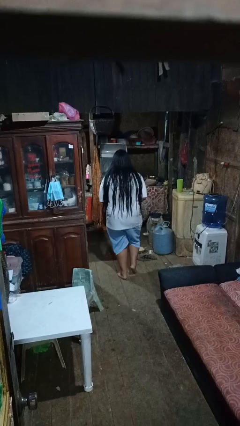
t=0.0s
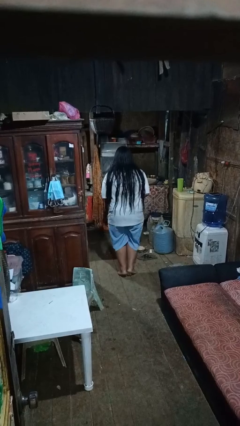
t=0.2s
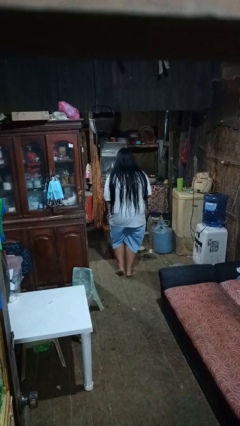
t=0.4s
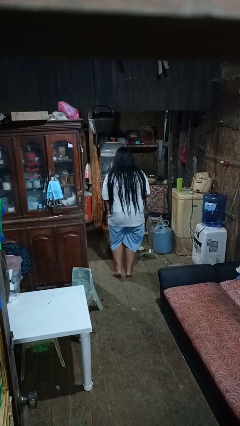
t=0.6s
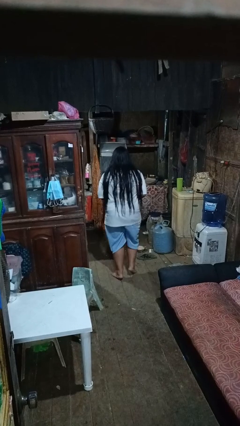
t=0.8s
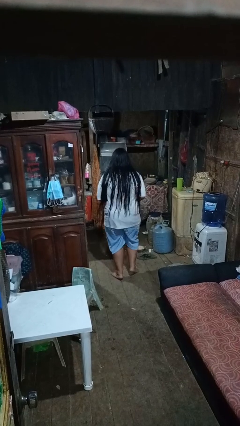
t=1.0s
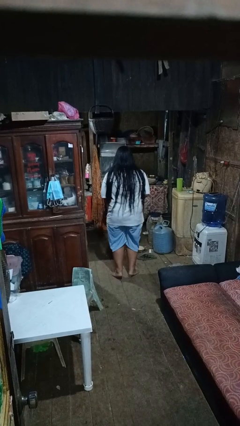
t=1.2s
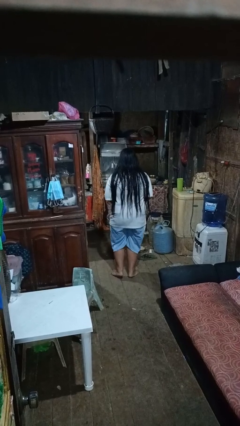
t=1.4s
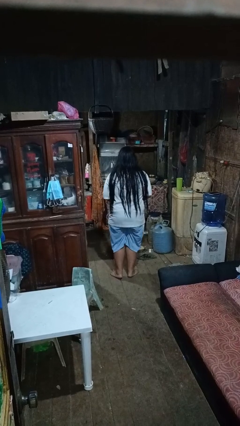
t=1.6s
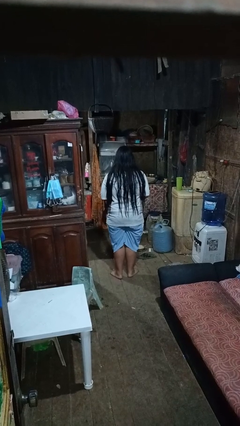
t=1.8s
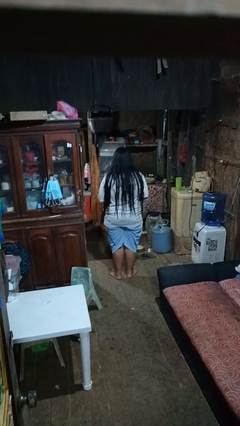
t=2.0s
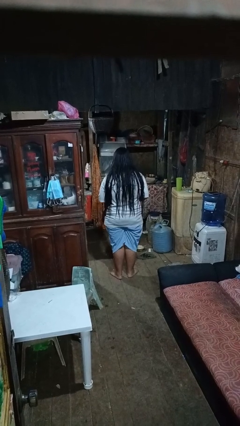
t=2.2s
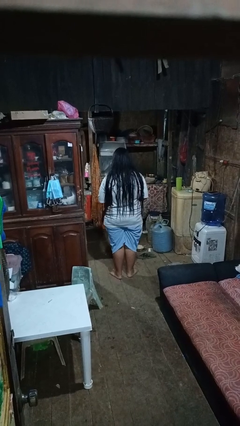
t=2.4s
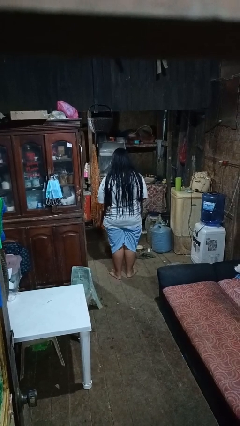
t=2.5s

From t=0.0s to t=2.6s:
person walks tiptoe

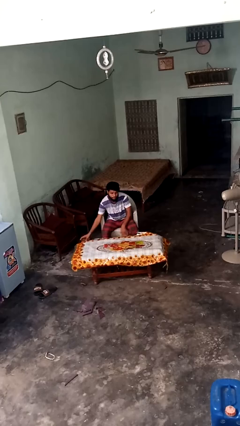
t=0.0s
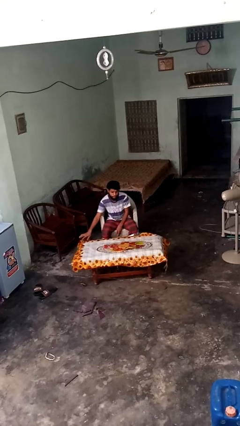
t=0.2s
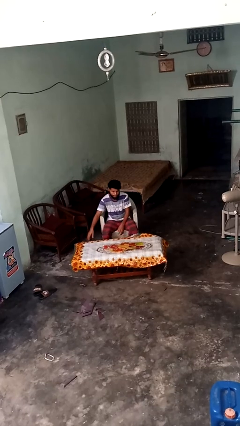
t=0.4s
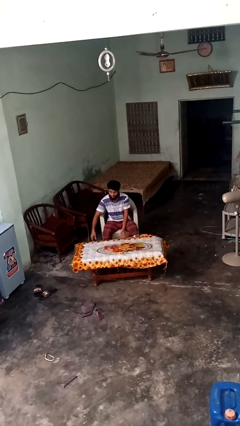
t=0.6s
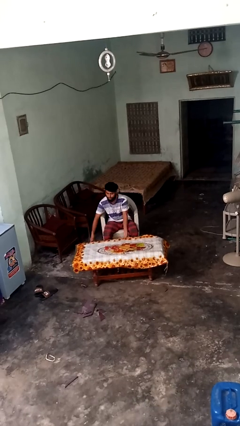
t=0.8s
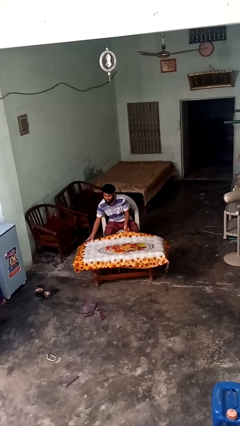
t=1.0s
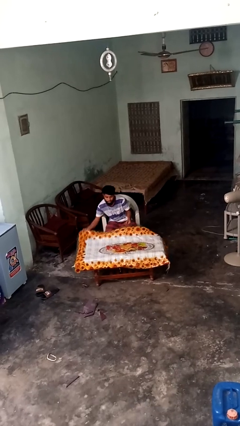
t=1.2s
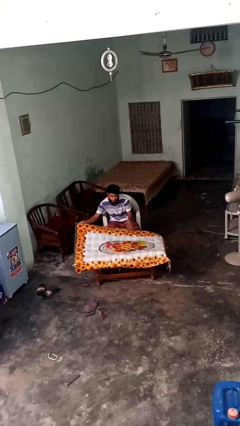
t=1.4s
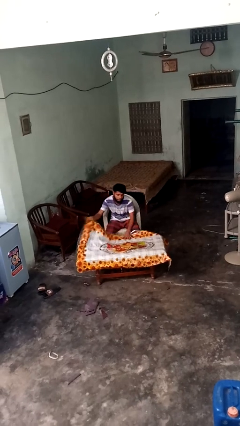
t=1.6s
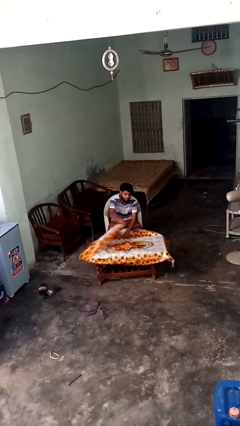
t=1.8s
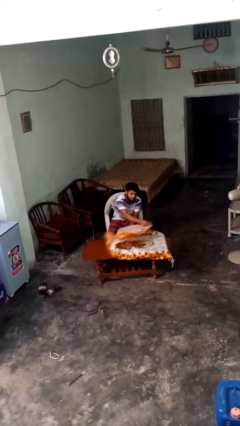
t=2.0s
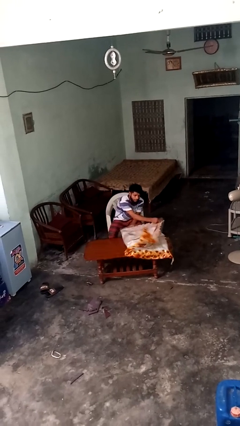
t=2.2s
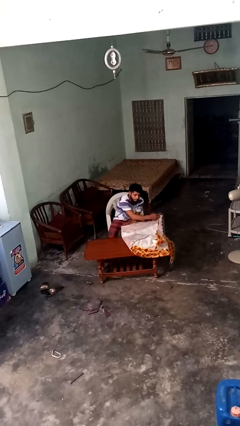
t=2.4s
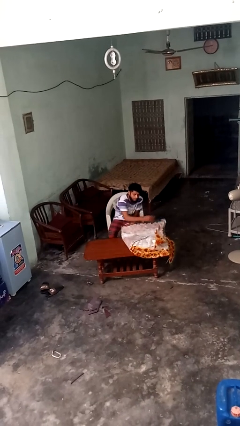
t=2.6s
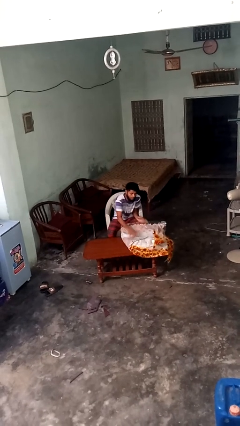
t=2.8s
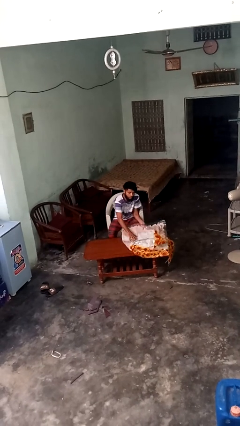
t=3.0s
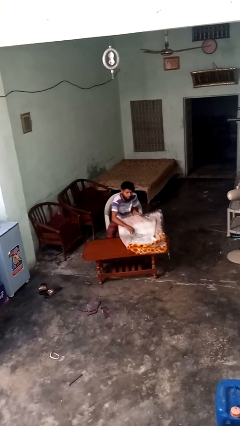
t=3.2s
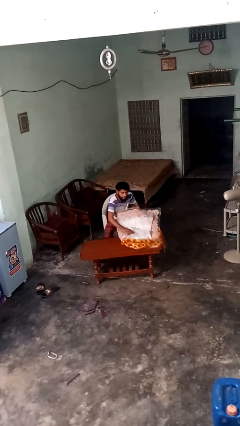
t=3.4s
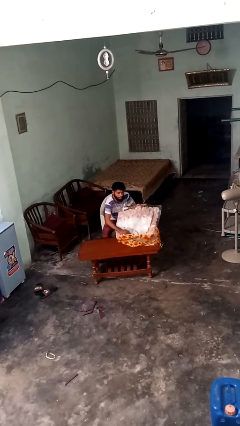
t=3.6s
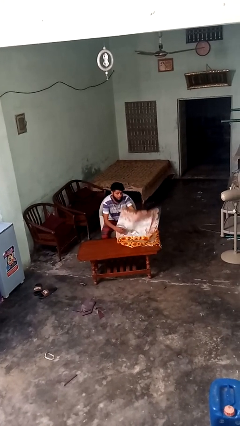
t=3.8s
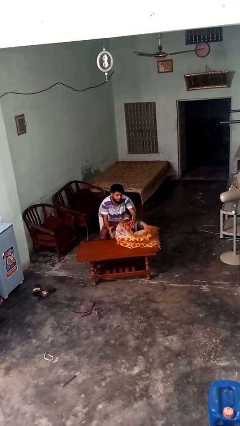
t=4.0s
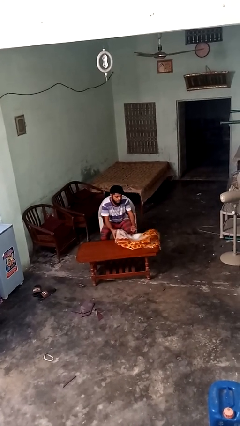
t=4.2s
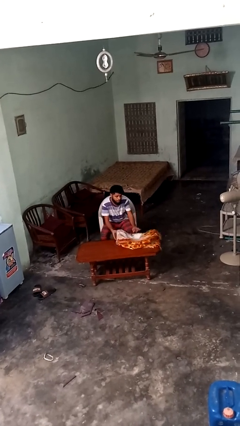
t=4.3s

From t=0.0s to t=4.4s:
person folds tablecloth

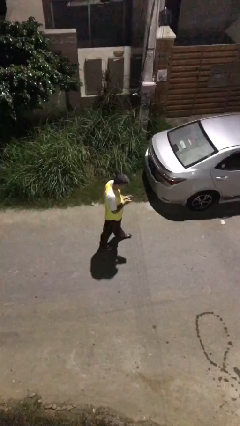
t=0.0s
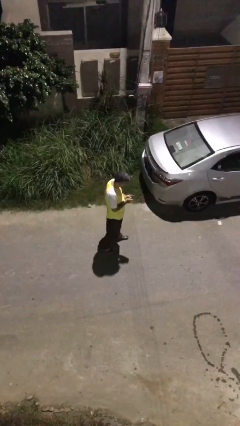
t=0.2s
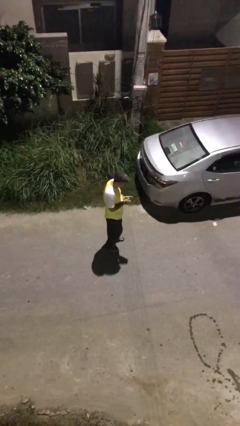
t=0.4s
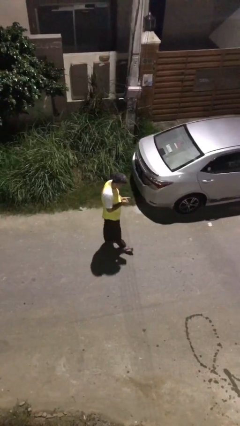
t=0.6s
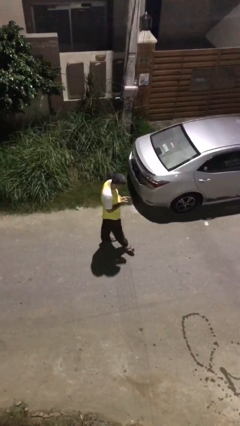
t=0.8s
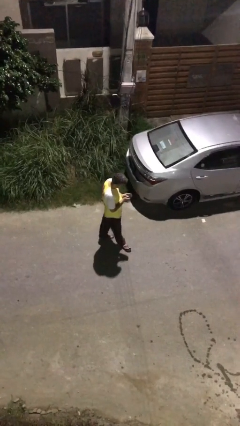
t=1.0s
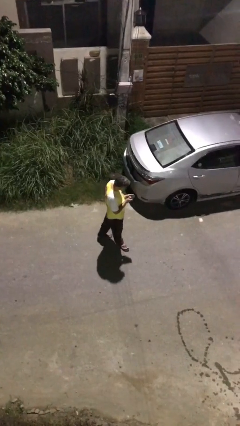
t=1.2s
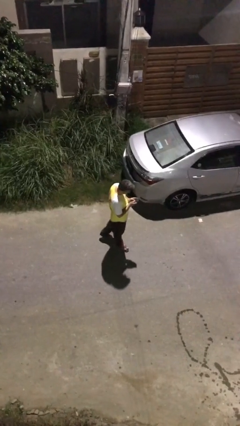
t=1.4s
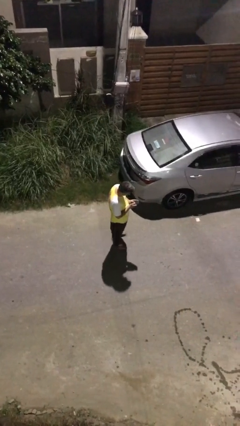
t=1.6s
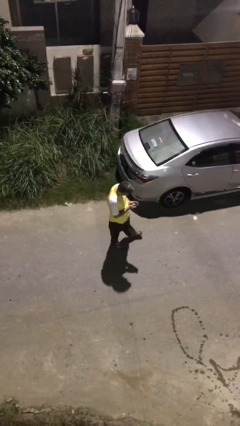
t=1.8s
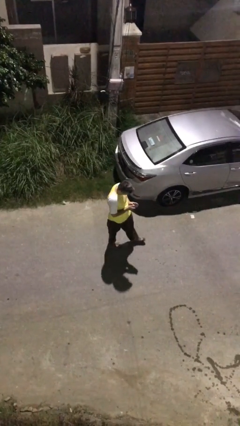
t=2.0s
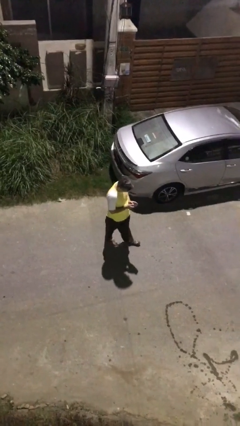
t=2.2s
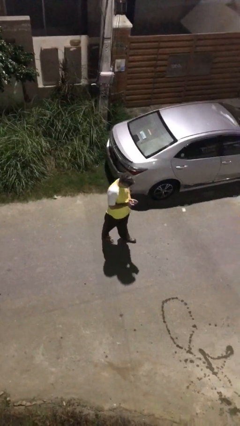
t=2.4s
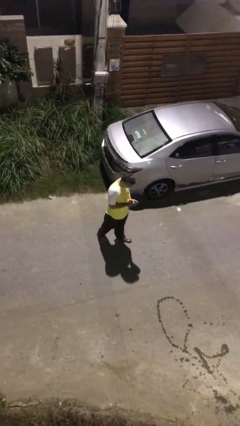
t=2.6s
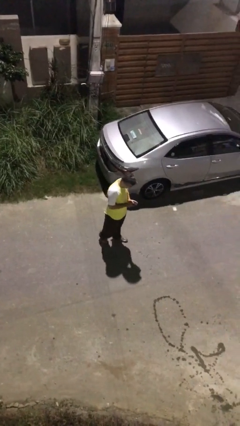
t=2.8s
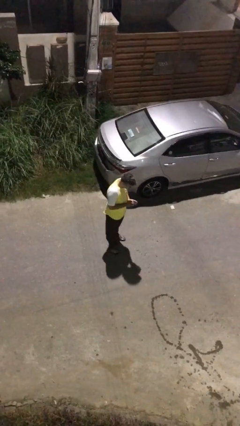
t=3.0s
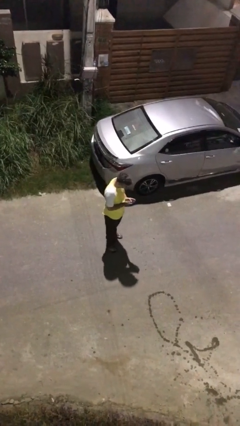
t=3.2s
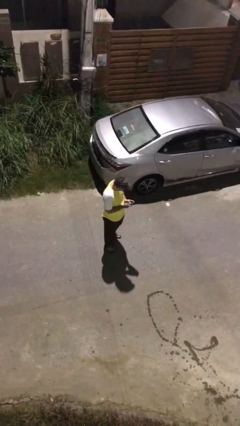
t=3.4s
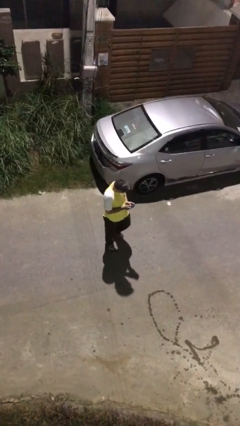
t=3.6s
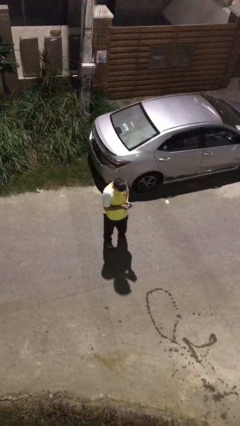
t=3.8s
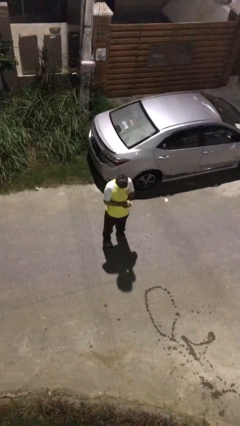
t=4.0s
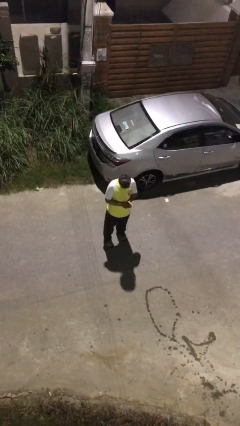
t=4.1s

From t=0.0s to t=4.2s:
person texts on phone

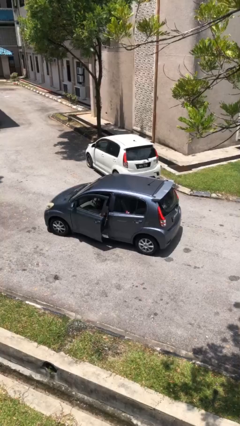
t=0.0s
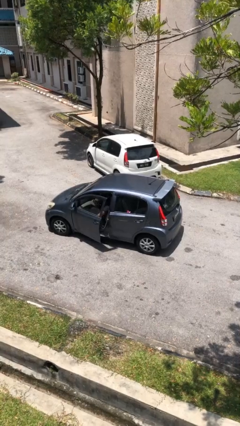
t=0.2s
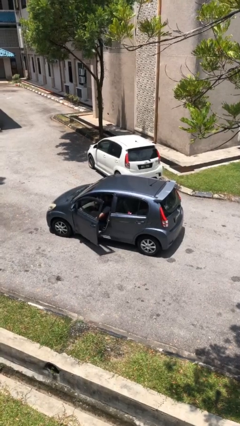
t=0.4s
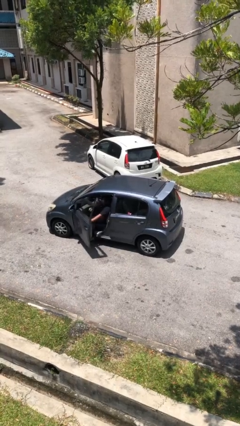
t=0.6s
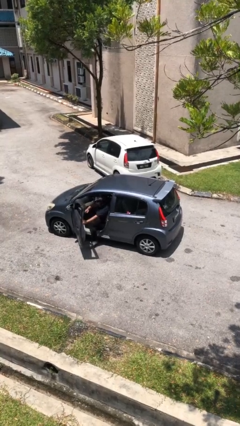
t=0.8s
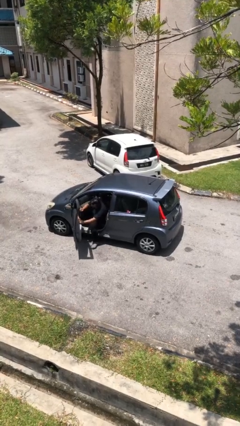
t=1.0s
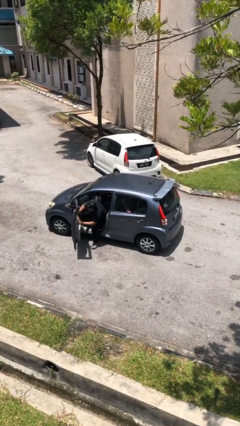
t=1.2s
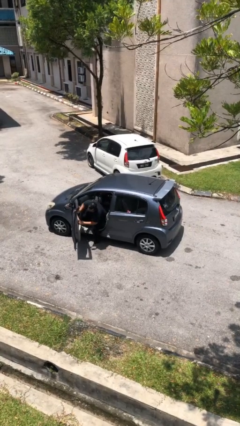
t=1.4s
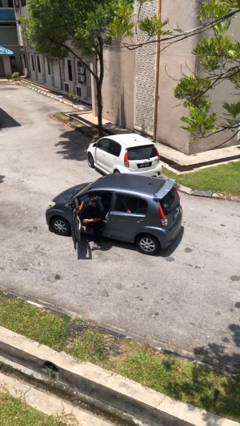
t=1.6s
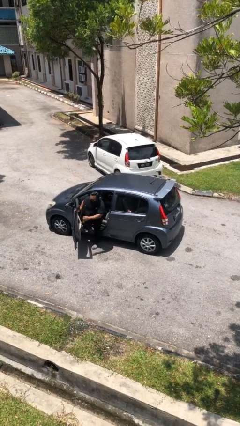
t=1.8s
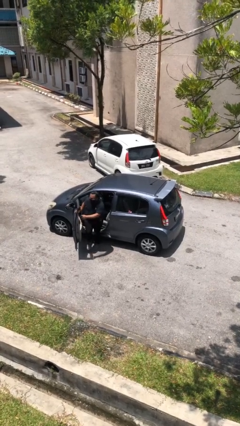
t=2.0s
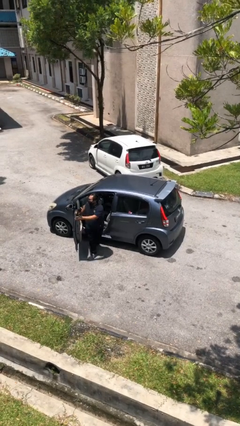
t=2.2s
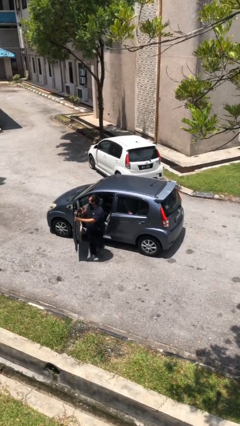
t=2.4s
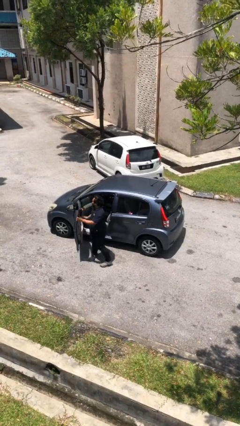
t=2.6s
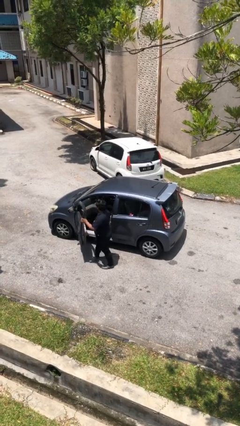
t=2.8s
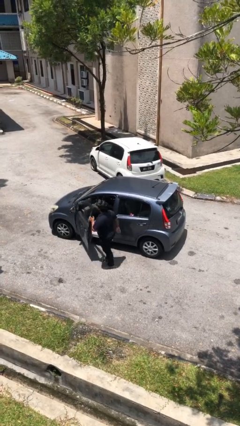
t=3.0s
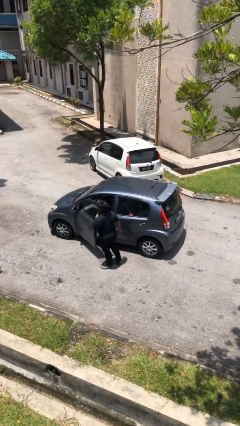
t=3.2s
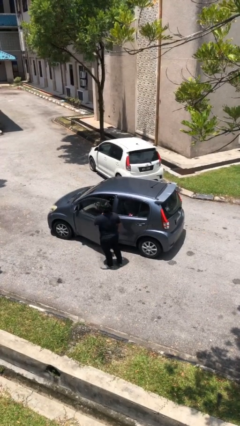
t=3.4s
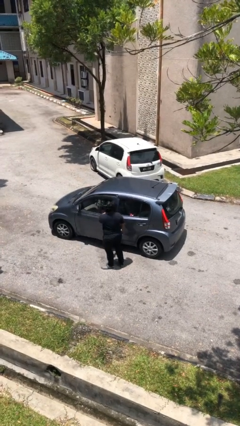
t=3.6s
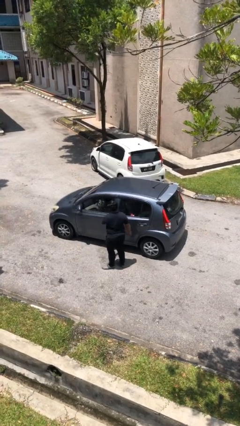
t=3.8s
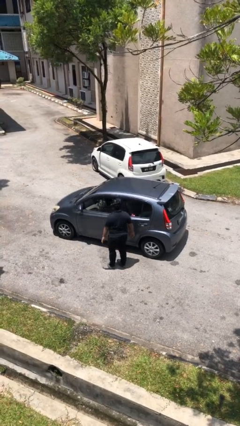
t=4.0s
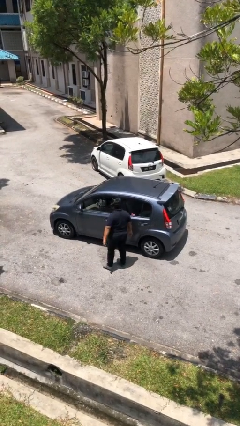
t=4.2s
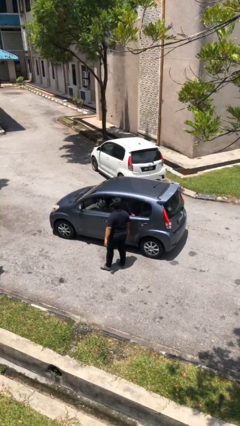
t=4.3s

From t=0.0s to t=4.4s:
car drops off person

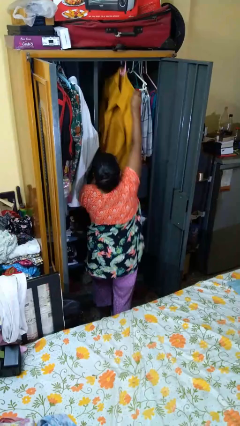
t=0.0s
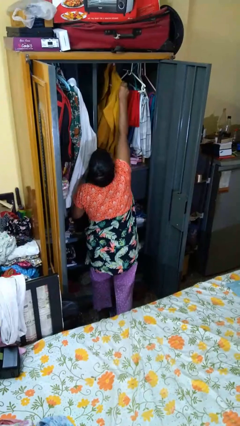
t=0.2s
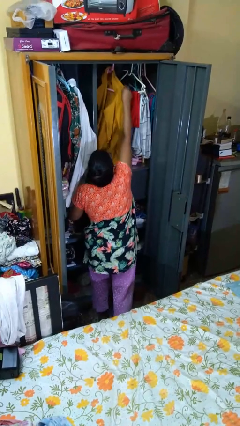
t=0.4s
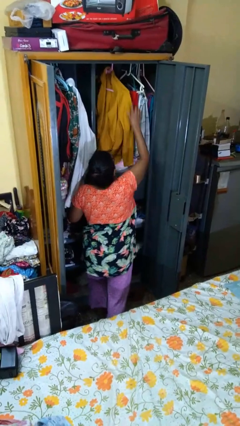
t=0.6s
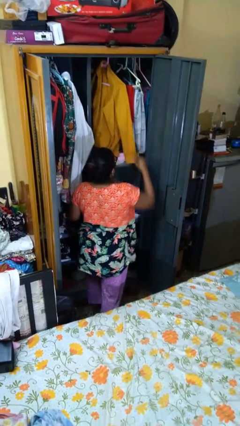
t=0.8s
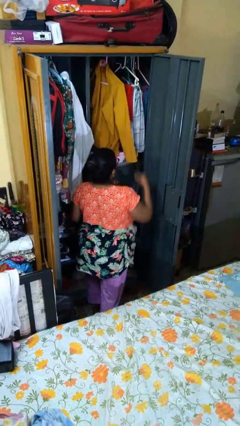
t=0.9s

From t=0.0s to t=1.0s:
person puts clothes into closet

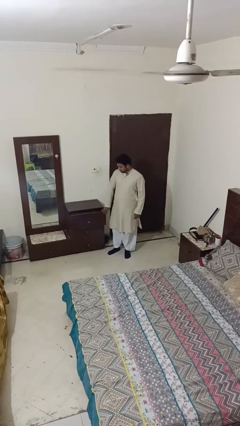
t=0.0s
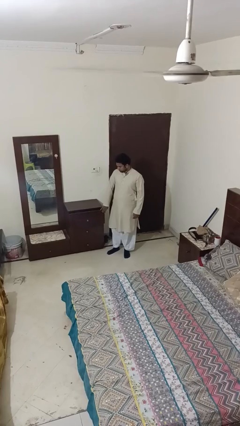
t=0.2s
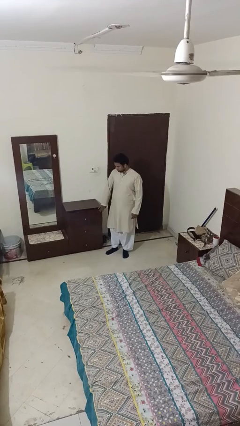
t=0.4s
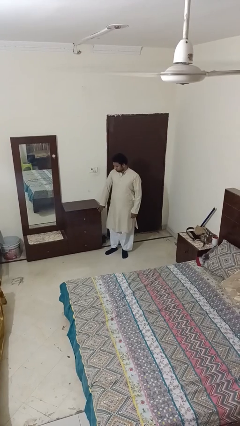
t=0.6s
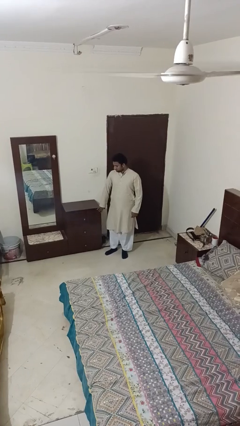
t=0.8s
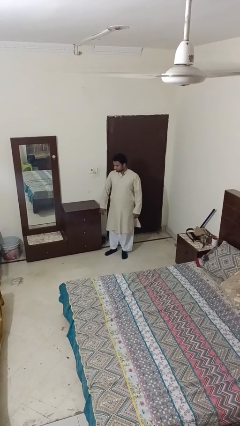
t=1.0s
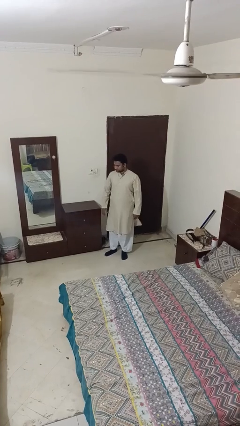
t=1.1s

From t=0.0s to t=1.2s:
person closes dresser drawer
